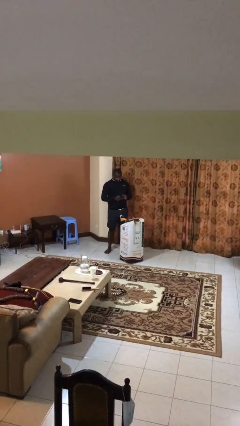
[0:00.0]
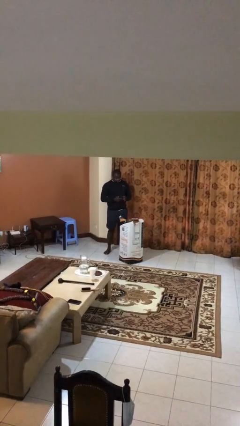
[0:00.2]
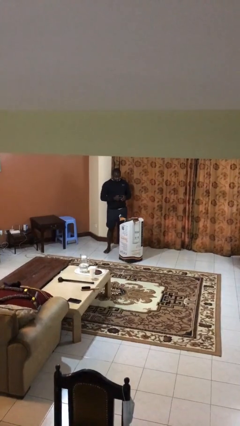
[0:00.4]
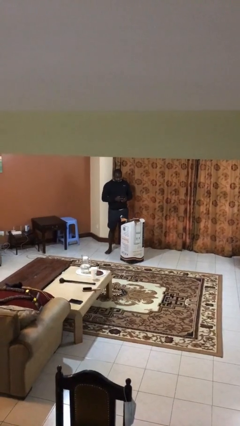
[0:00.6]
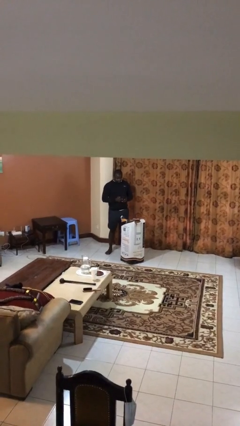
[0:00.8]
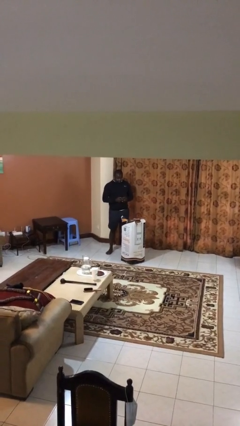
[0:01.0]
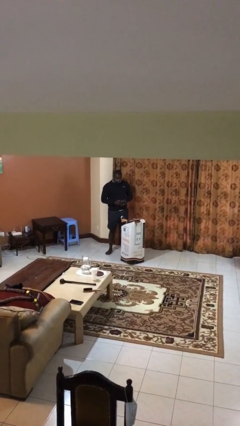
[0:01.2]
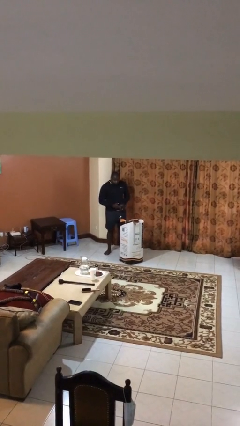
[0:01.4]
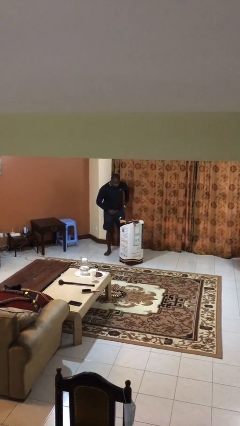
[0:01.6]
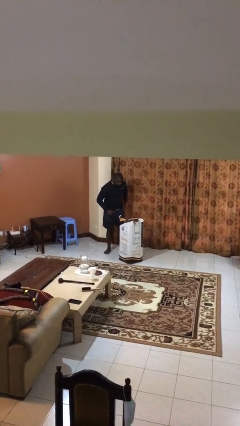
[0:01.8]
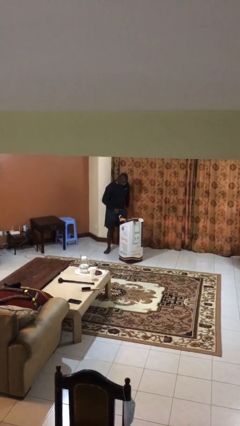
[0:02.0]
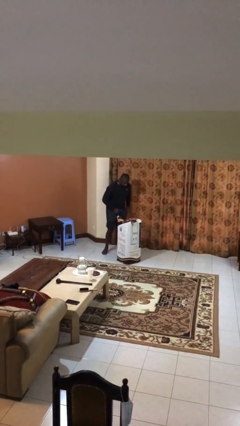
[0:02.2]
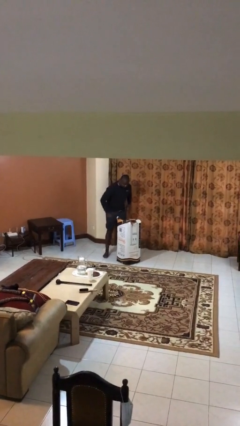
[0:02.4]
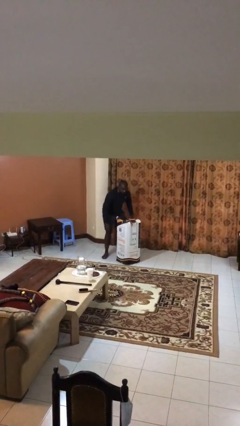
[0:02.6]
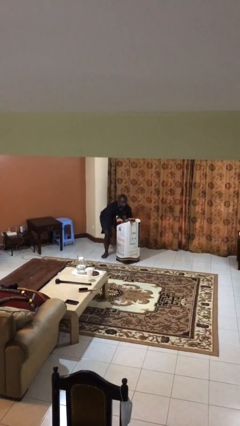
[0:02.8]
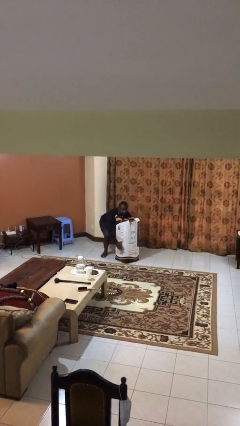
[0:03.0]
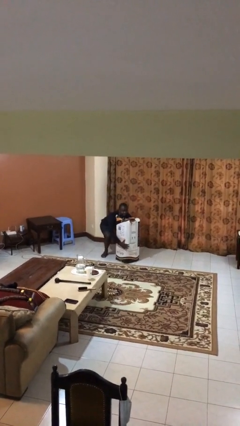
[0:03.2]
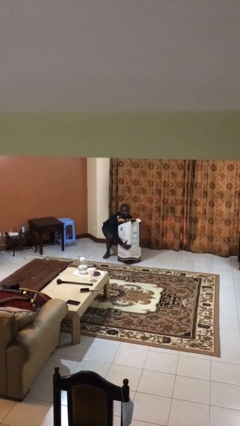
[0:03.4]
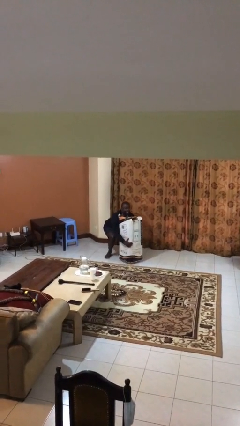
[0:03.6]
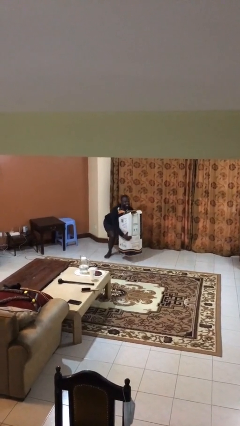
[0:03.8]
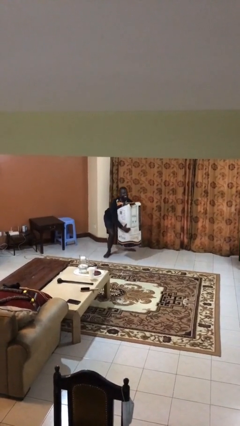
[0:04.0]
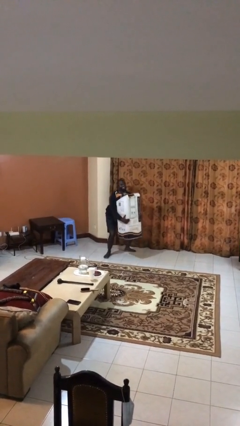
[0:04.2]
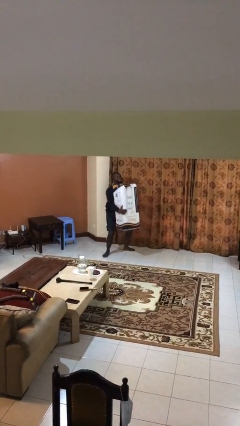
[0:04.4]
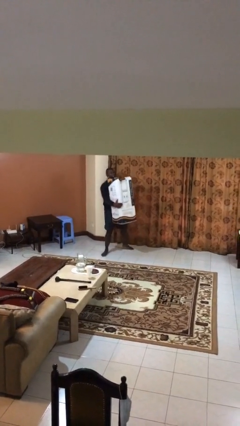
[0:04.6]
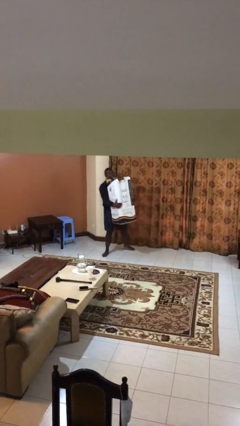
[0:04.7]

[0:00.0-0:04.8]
person picks up object from floor

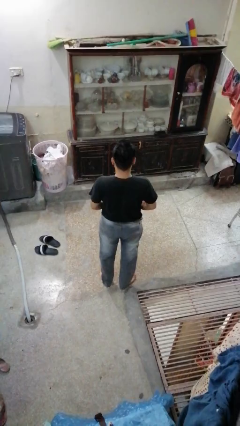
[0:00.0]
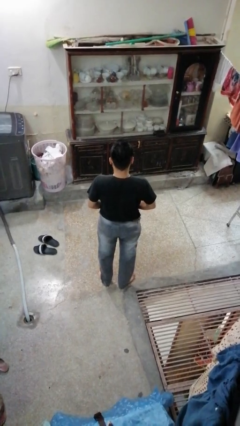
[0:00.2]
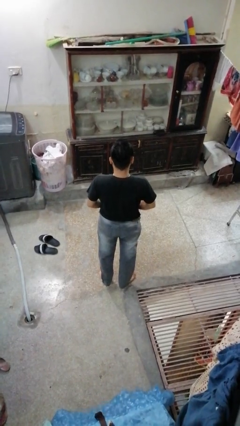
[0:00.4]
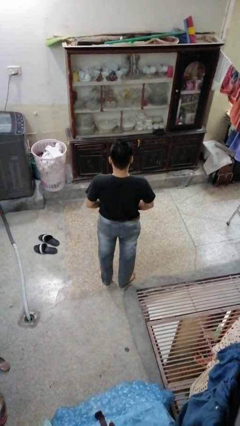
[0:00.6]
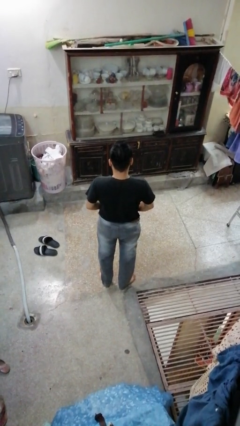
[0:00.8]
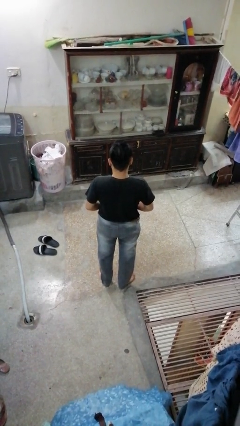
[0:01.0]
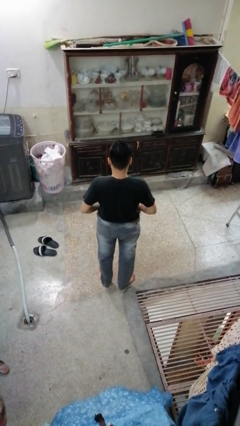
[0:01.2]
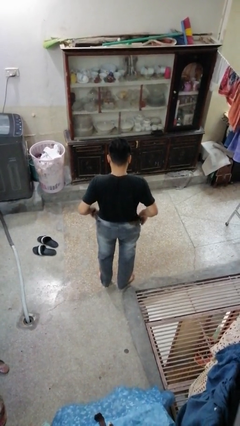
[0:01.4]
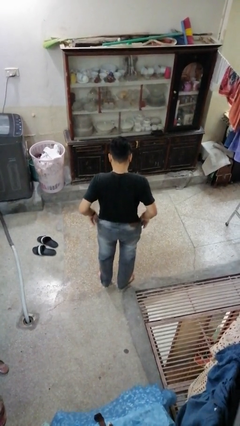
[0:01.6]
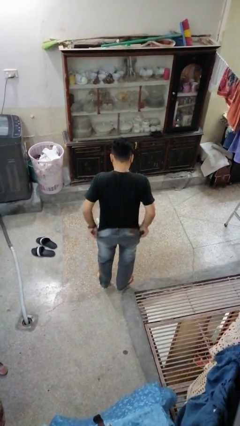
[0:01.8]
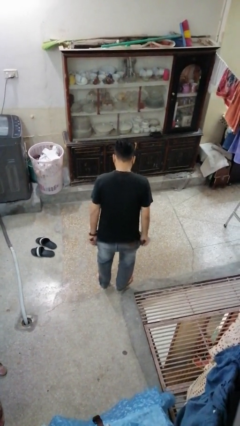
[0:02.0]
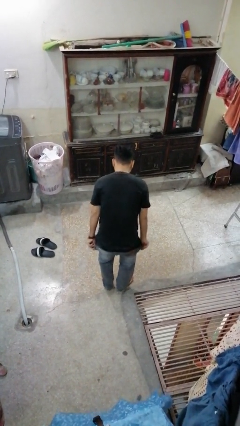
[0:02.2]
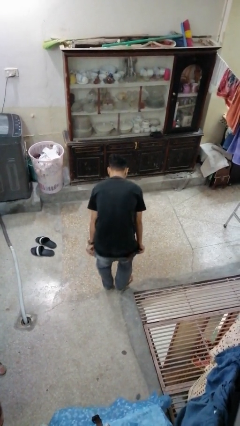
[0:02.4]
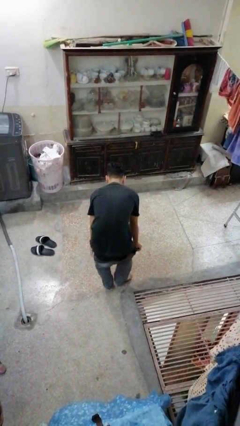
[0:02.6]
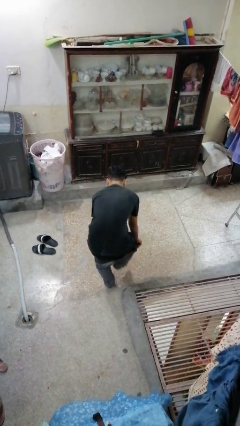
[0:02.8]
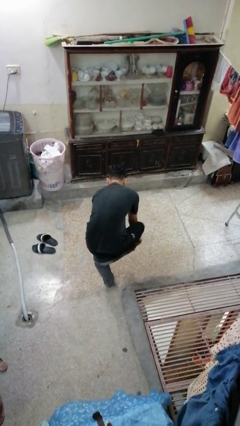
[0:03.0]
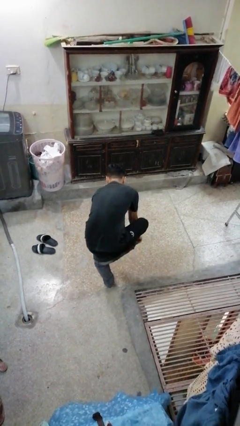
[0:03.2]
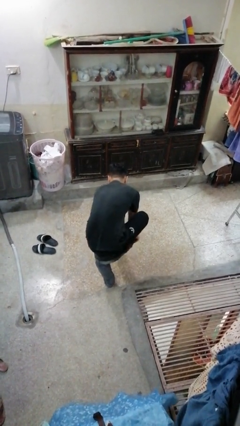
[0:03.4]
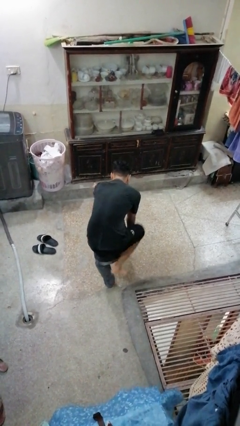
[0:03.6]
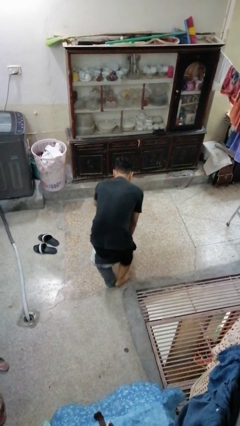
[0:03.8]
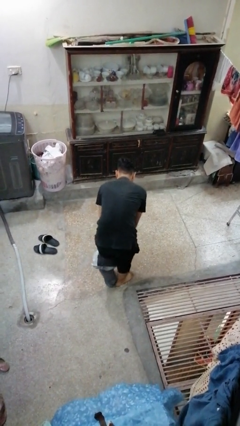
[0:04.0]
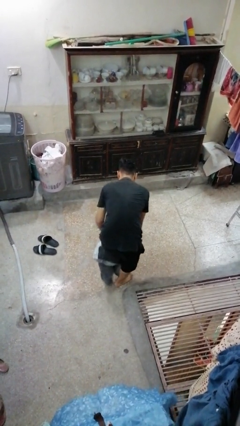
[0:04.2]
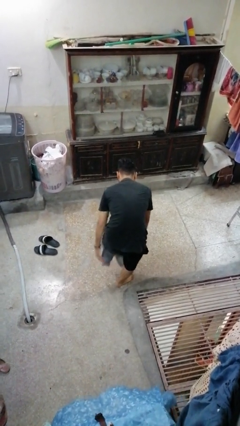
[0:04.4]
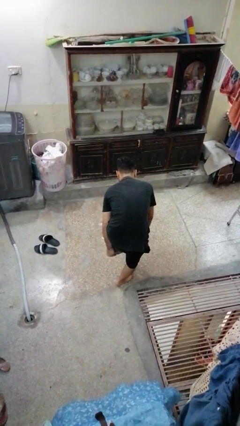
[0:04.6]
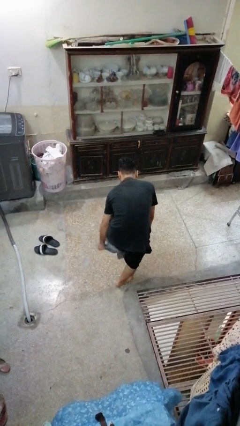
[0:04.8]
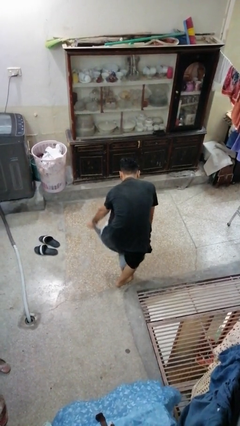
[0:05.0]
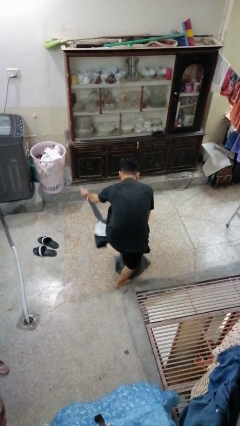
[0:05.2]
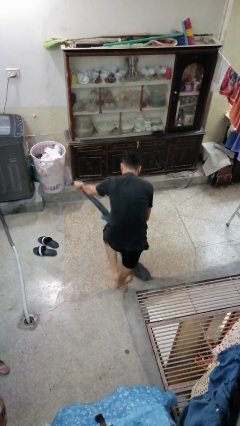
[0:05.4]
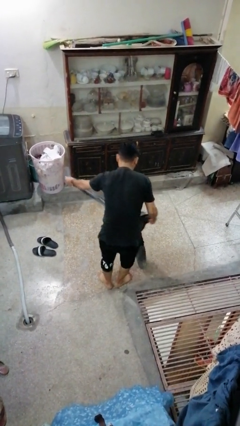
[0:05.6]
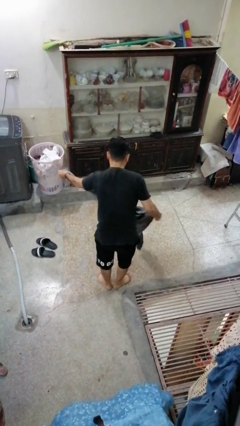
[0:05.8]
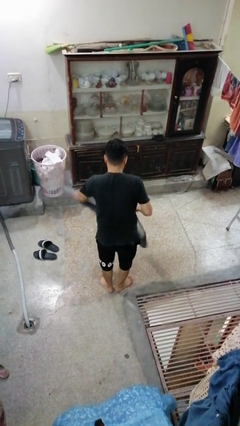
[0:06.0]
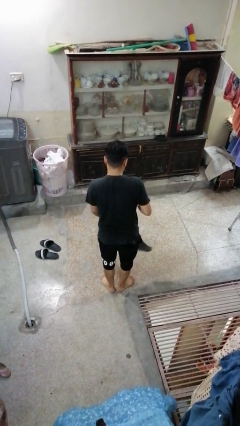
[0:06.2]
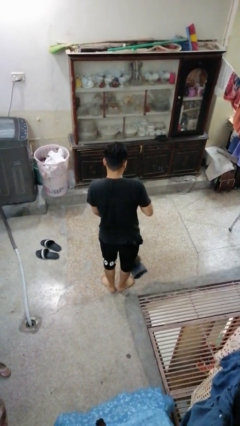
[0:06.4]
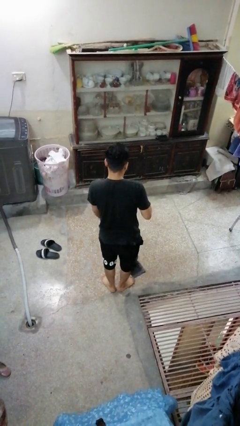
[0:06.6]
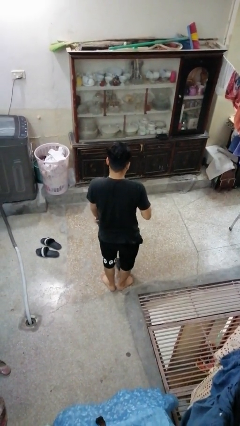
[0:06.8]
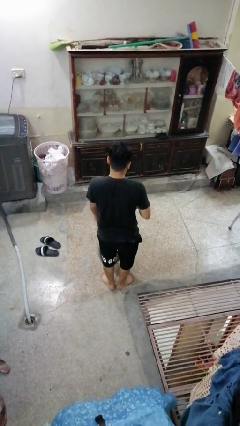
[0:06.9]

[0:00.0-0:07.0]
person takes off pants

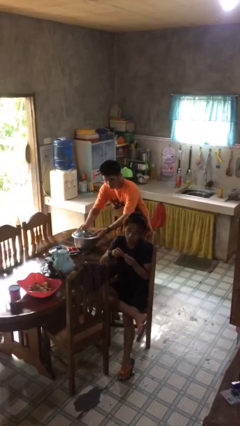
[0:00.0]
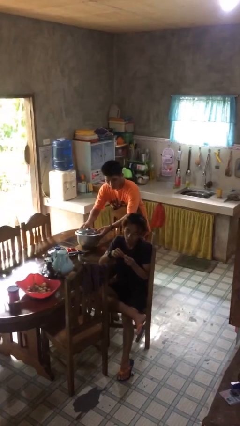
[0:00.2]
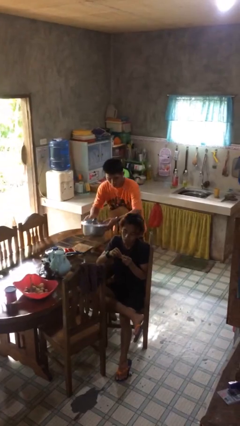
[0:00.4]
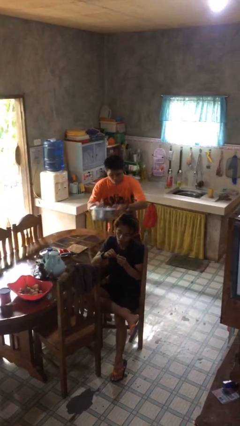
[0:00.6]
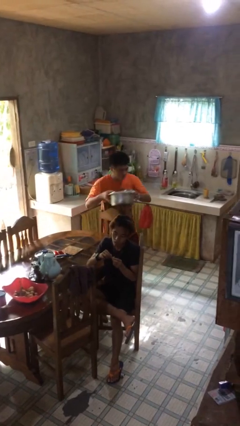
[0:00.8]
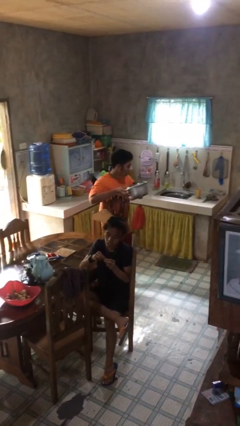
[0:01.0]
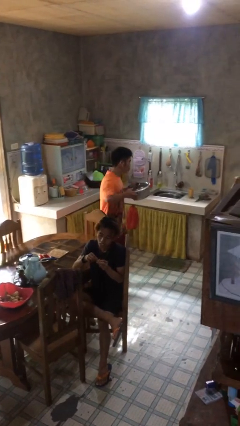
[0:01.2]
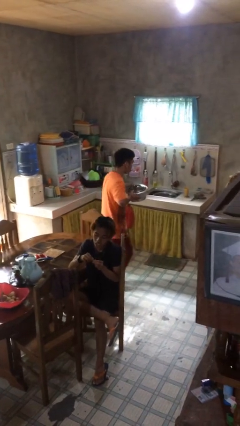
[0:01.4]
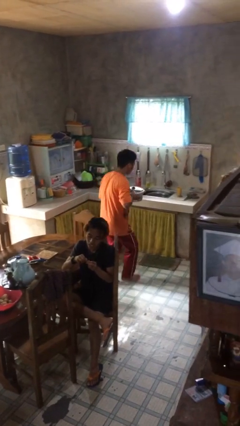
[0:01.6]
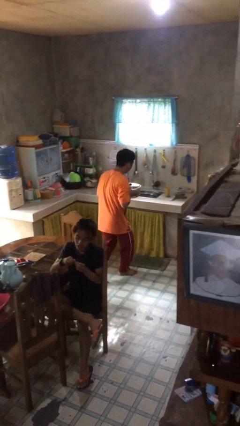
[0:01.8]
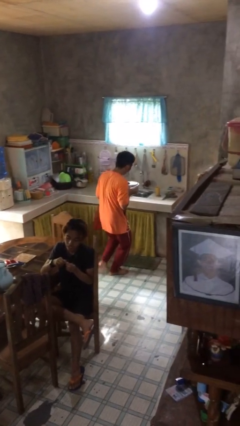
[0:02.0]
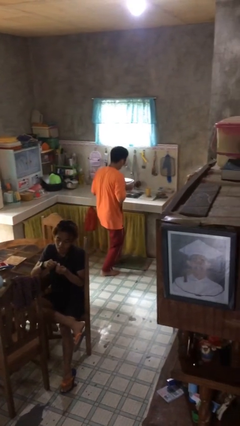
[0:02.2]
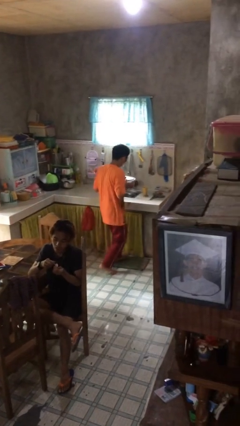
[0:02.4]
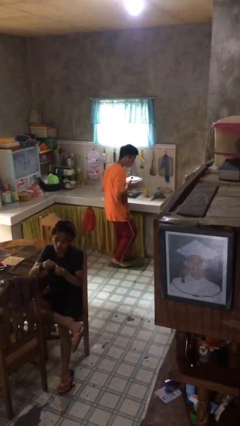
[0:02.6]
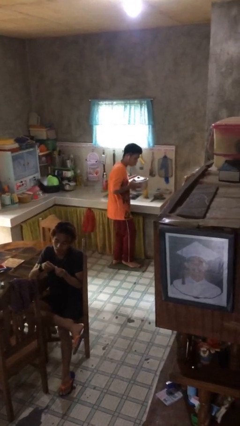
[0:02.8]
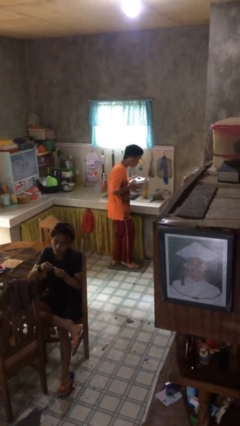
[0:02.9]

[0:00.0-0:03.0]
person steals object from person

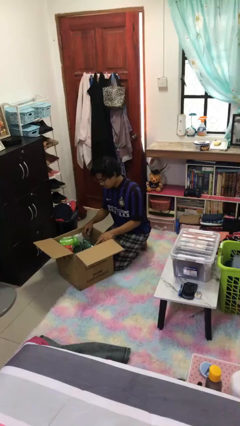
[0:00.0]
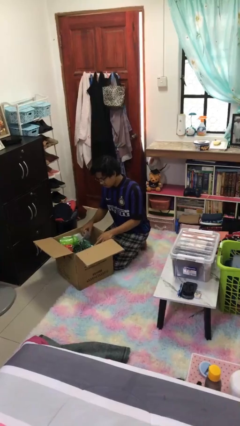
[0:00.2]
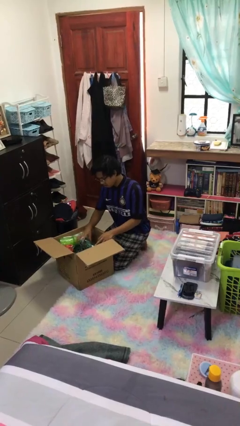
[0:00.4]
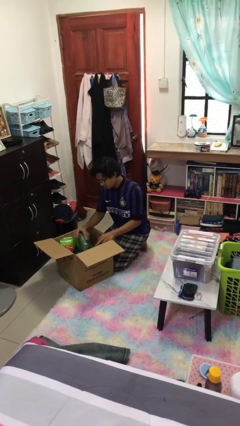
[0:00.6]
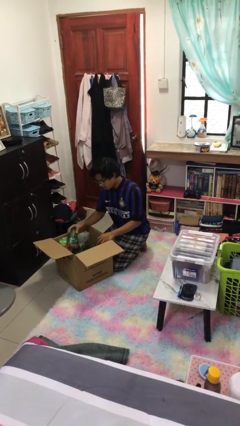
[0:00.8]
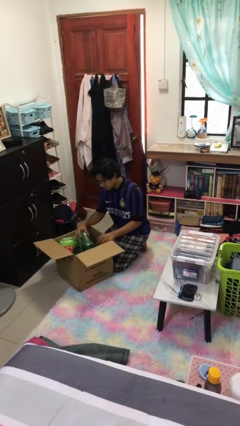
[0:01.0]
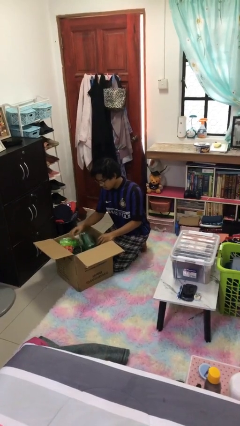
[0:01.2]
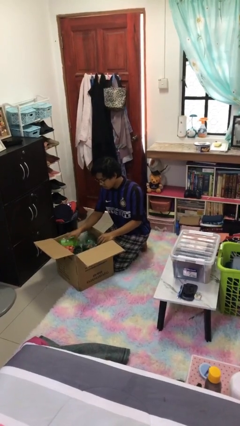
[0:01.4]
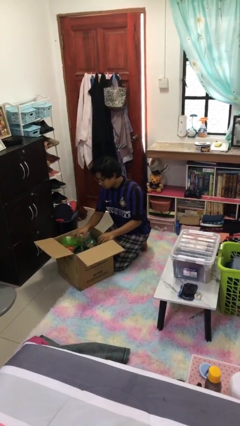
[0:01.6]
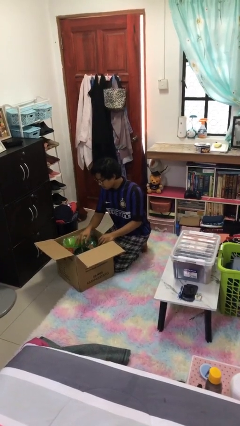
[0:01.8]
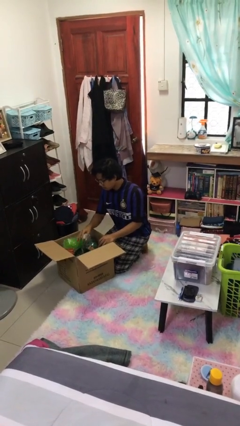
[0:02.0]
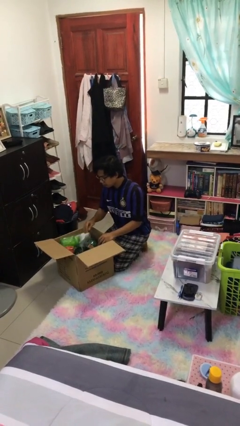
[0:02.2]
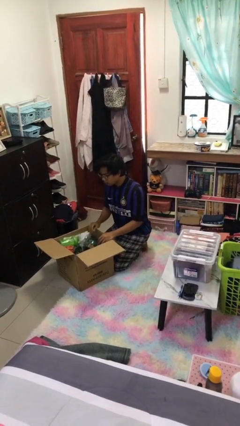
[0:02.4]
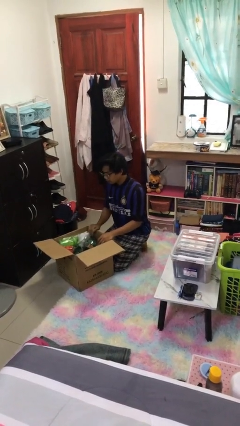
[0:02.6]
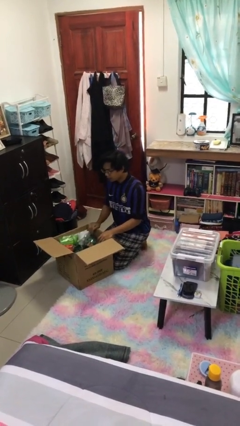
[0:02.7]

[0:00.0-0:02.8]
person searches in box
